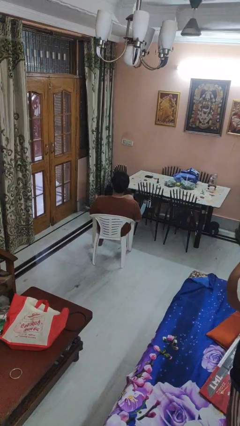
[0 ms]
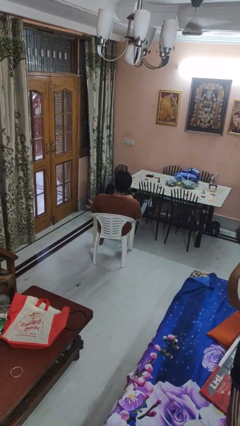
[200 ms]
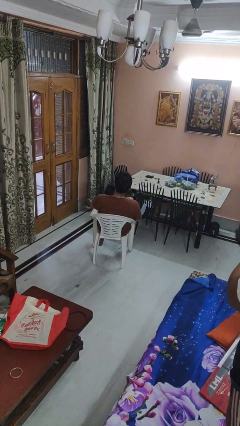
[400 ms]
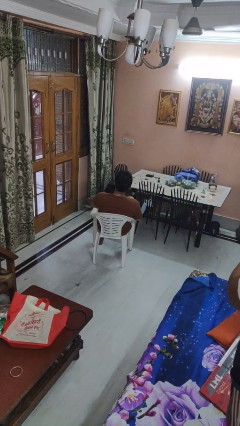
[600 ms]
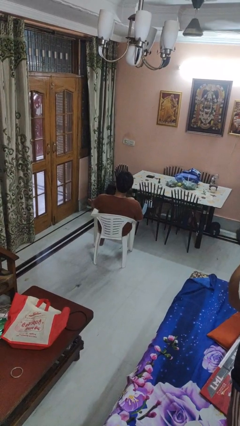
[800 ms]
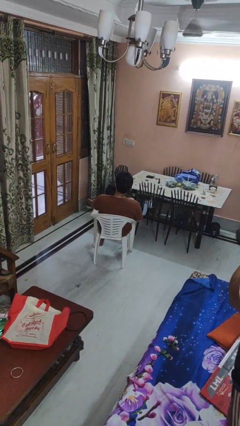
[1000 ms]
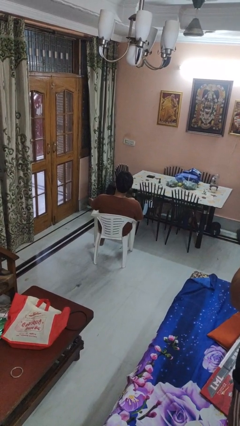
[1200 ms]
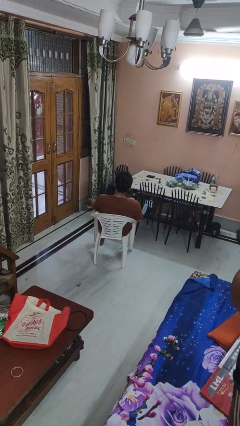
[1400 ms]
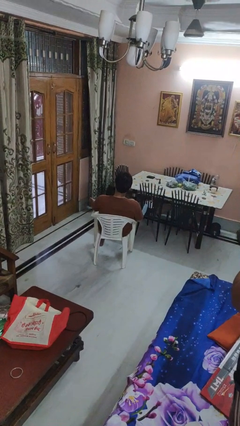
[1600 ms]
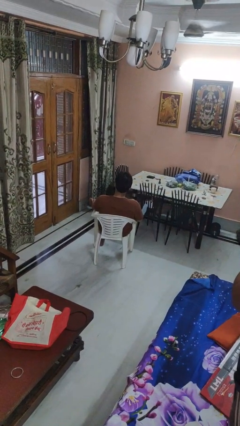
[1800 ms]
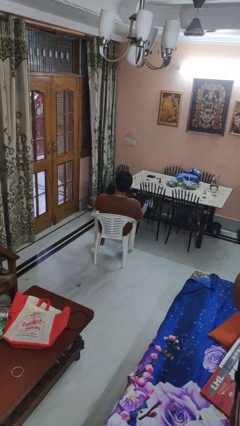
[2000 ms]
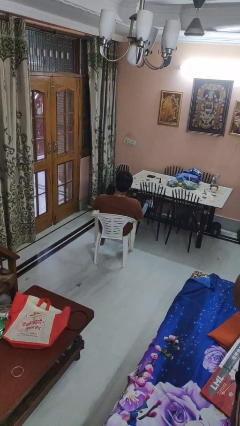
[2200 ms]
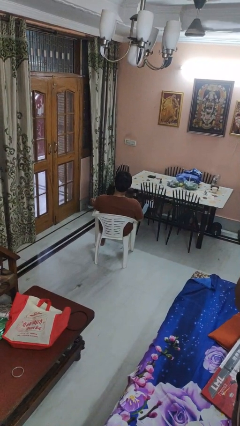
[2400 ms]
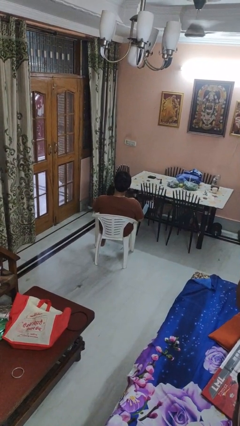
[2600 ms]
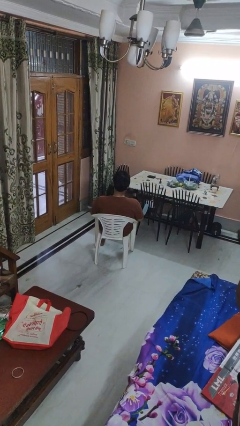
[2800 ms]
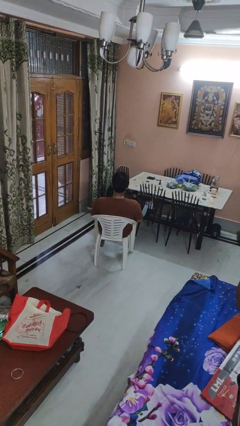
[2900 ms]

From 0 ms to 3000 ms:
person rubs foot

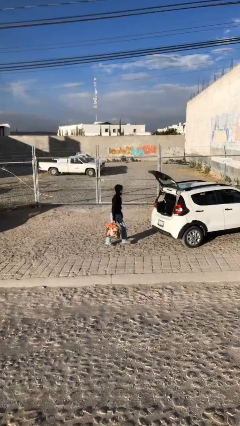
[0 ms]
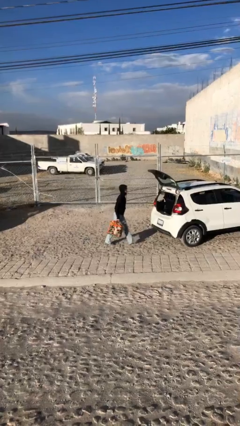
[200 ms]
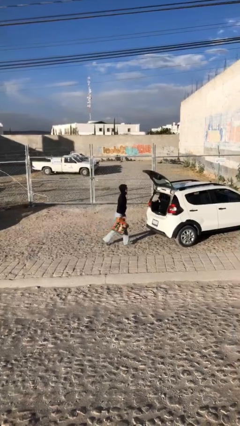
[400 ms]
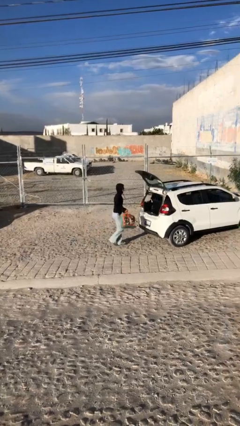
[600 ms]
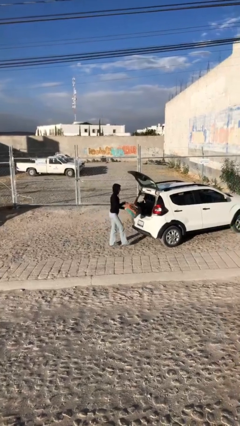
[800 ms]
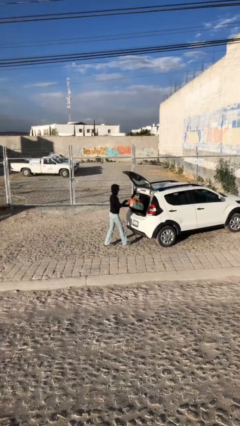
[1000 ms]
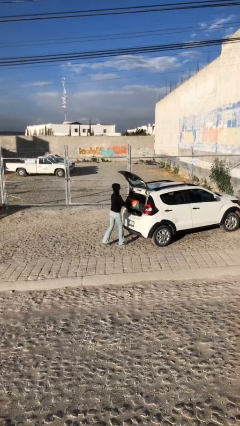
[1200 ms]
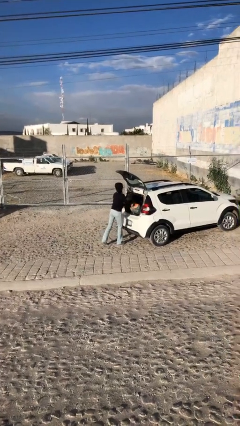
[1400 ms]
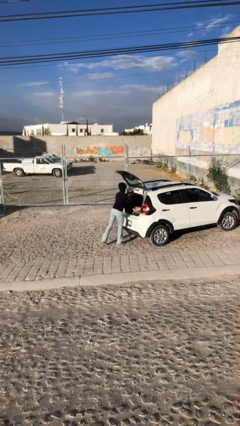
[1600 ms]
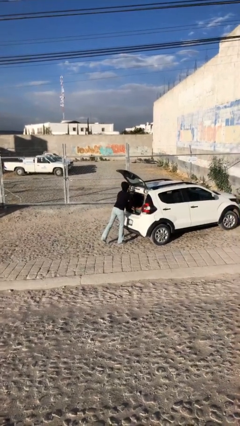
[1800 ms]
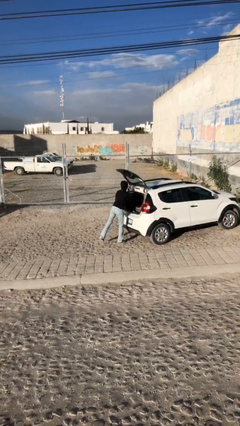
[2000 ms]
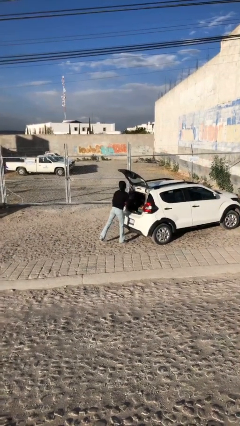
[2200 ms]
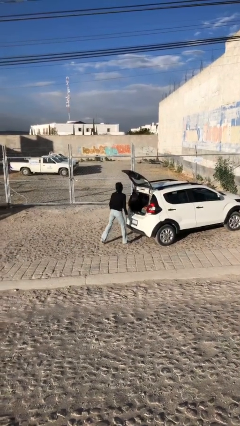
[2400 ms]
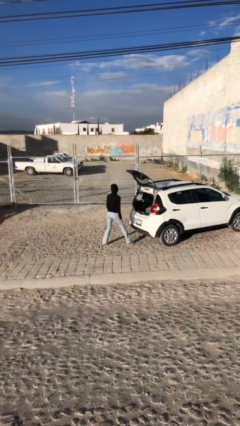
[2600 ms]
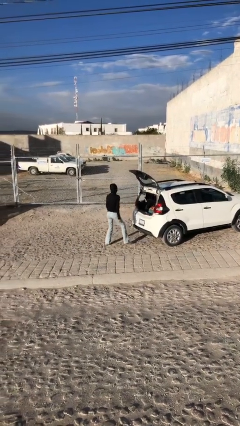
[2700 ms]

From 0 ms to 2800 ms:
person loads car

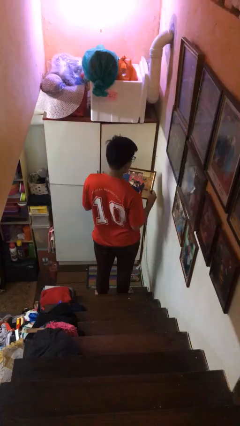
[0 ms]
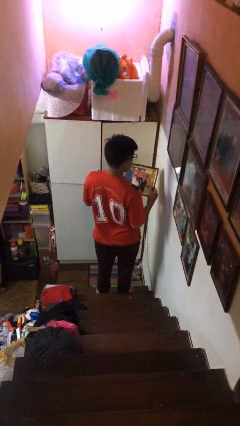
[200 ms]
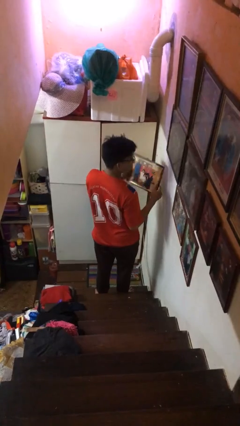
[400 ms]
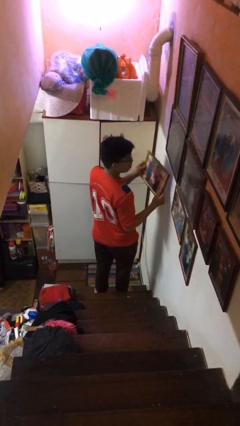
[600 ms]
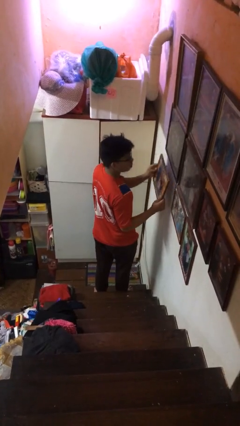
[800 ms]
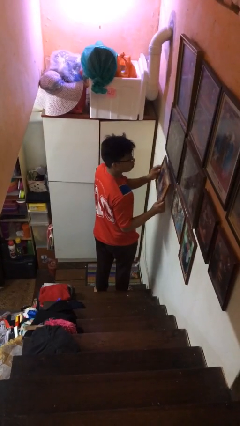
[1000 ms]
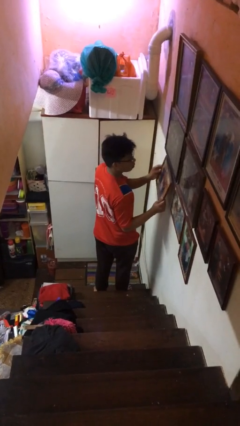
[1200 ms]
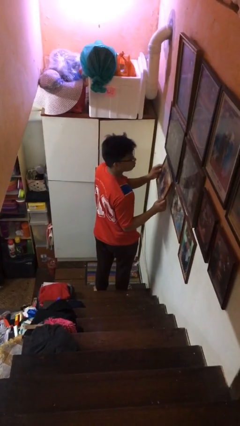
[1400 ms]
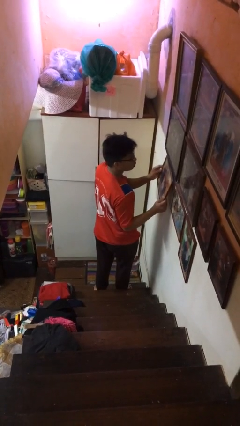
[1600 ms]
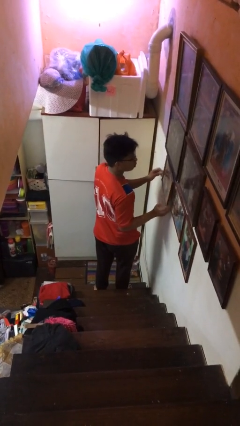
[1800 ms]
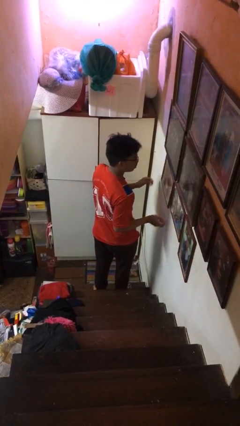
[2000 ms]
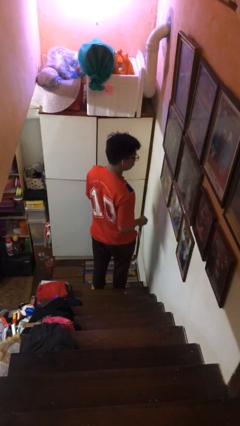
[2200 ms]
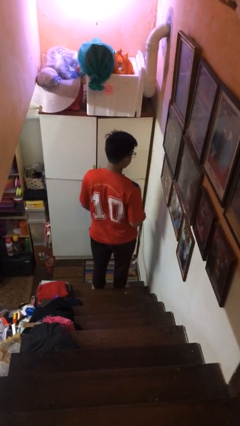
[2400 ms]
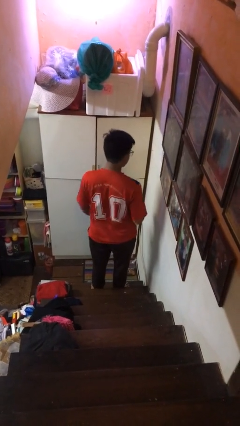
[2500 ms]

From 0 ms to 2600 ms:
person puts up picture frame

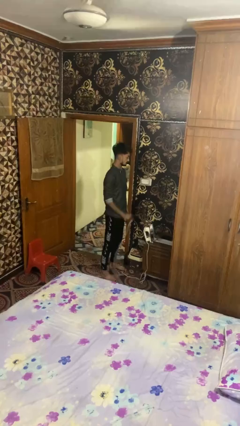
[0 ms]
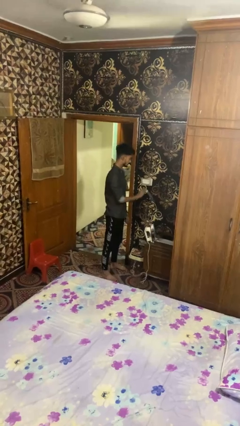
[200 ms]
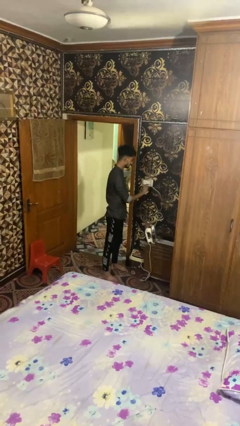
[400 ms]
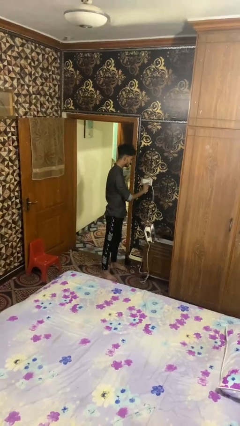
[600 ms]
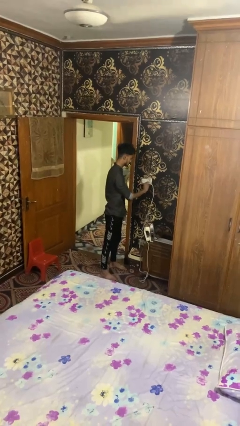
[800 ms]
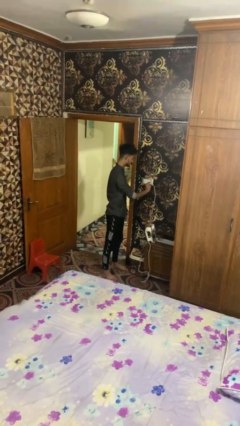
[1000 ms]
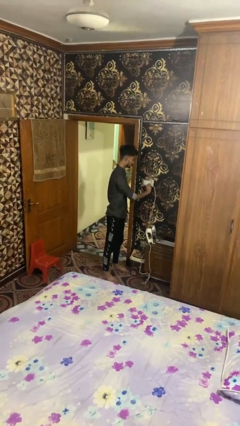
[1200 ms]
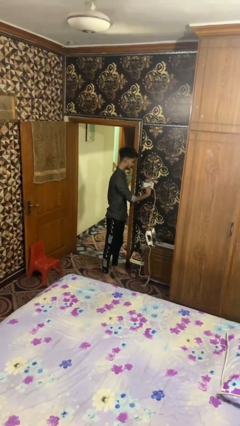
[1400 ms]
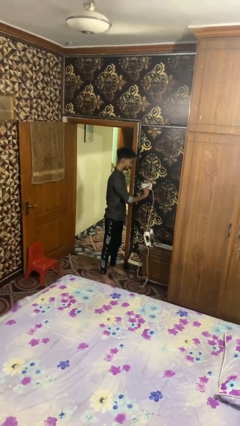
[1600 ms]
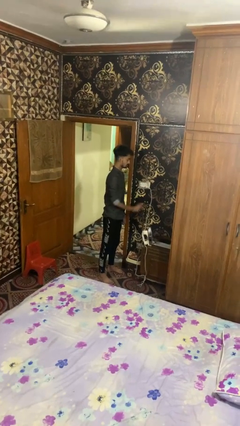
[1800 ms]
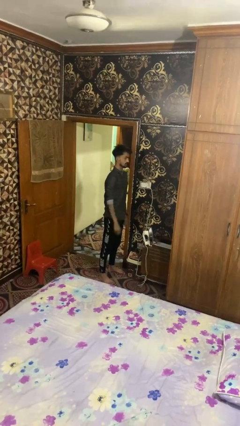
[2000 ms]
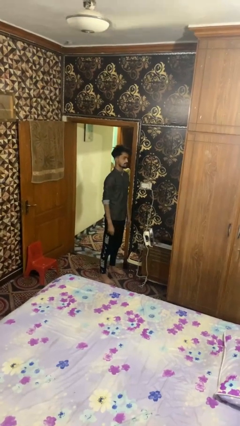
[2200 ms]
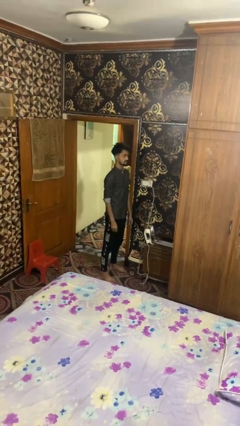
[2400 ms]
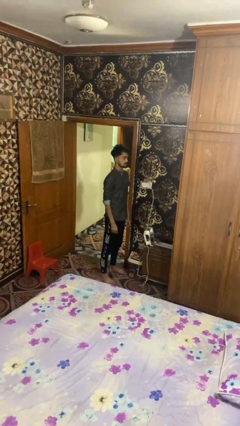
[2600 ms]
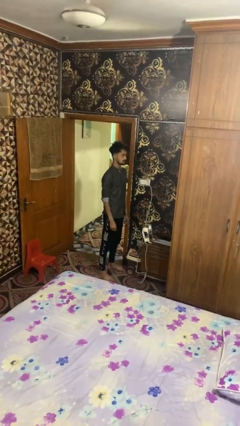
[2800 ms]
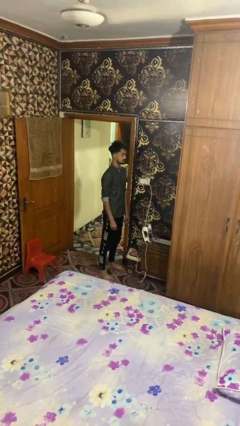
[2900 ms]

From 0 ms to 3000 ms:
person plugs into electrical socket

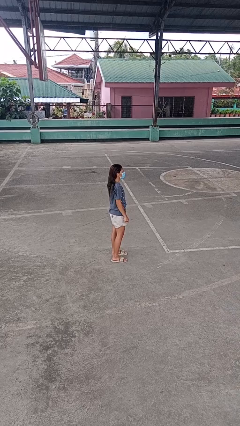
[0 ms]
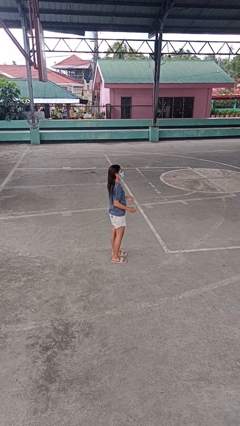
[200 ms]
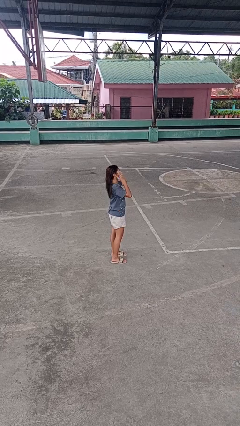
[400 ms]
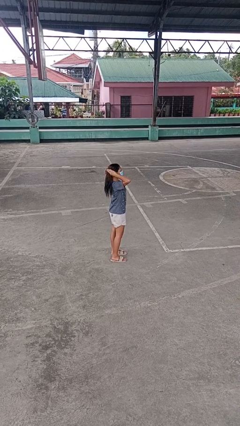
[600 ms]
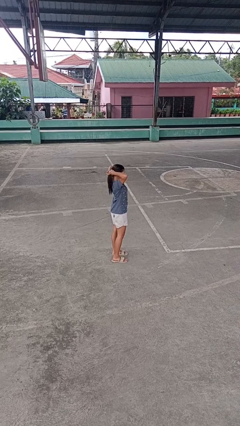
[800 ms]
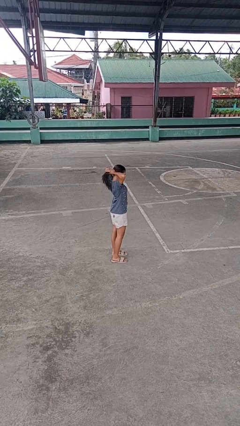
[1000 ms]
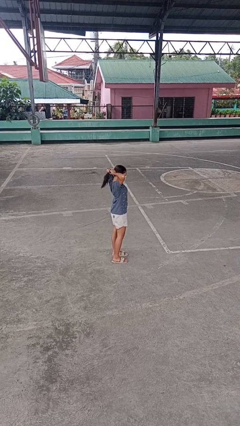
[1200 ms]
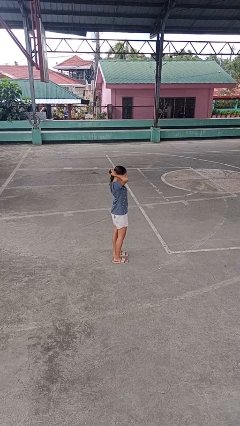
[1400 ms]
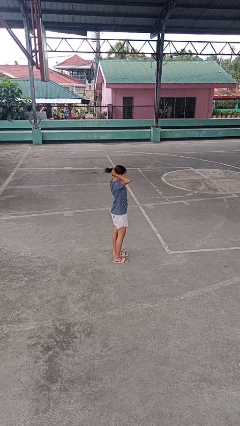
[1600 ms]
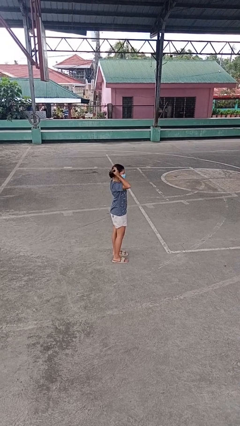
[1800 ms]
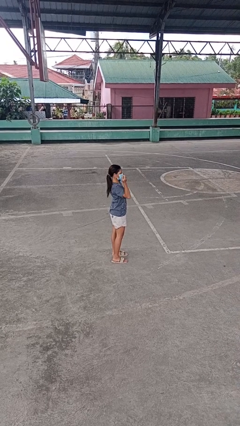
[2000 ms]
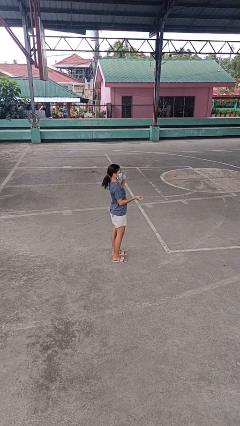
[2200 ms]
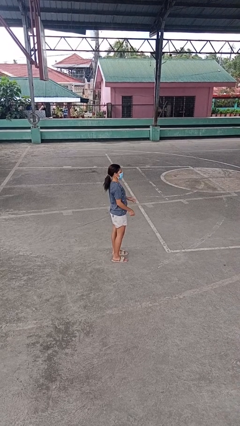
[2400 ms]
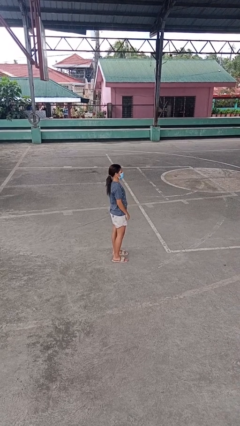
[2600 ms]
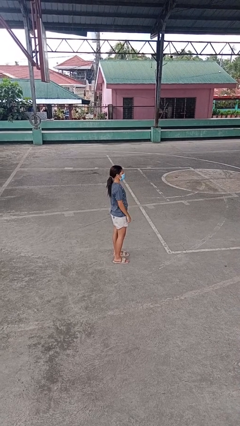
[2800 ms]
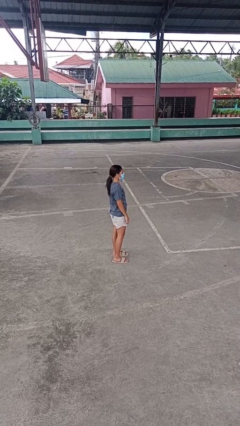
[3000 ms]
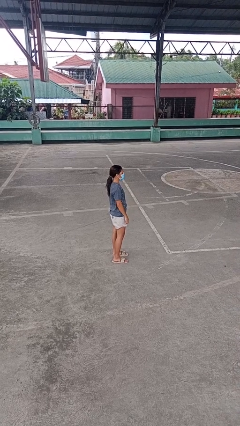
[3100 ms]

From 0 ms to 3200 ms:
person puts hair in ponytail

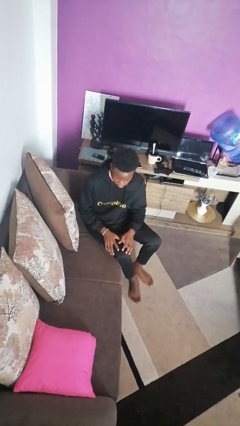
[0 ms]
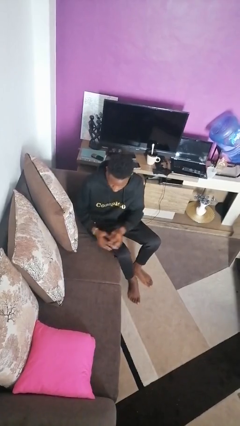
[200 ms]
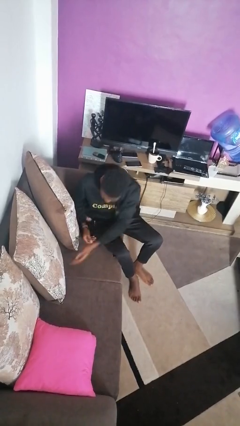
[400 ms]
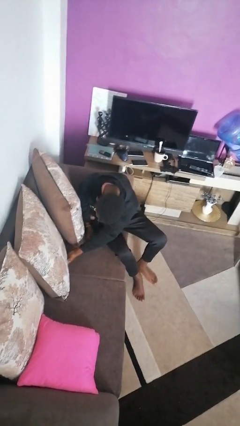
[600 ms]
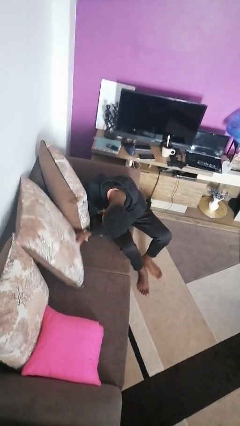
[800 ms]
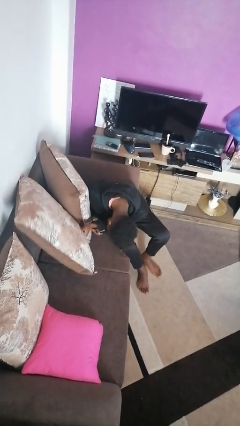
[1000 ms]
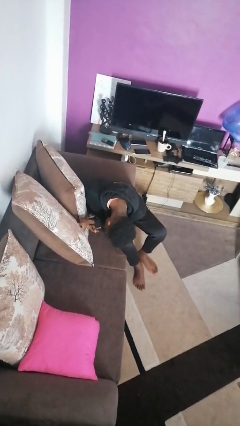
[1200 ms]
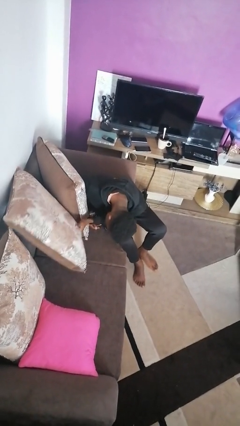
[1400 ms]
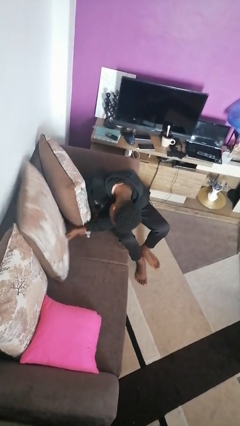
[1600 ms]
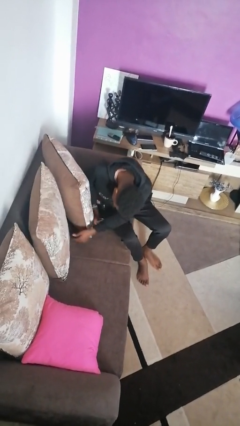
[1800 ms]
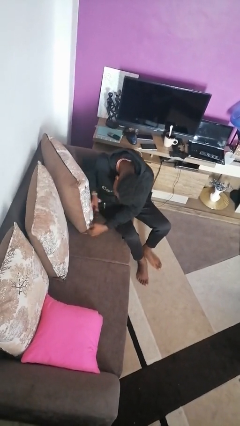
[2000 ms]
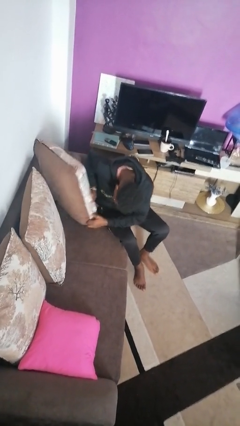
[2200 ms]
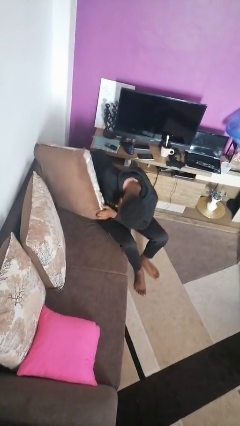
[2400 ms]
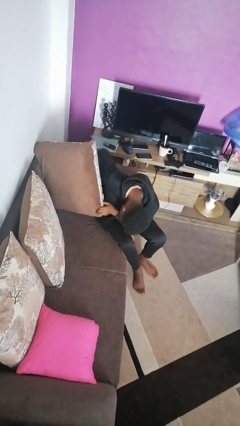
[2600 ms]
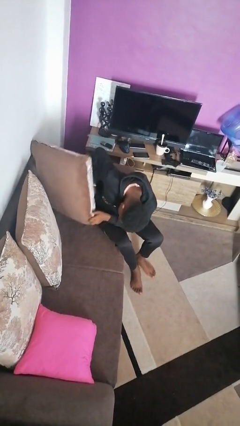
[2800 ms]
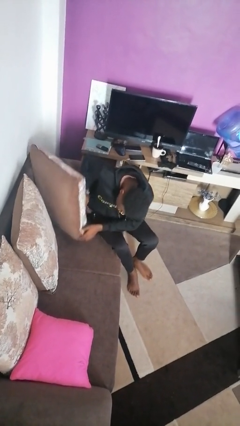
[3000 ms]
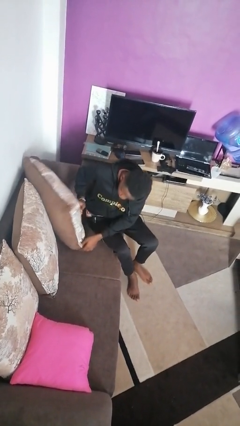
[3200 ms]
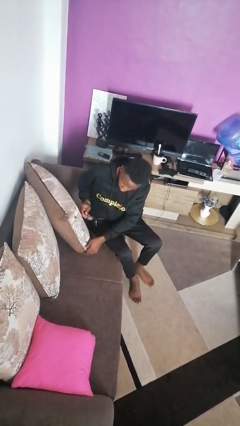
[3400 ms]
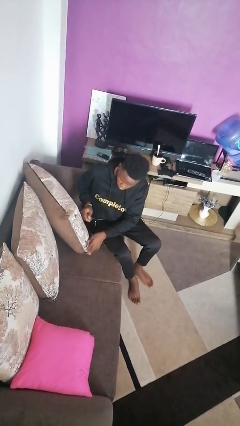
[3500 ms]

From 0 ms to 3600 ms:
person searches in couch
